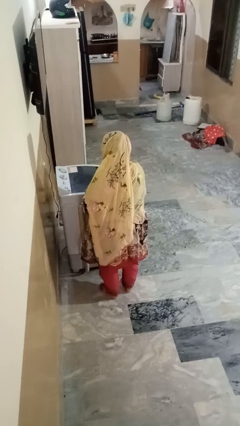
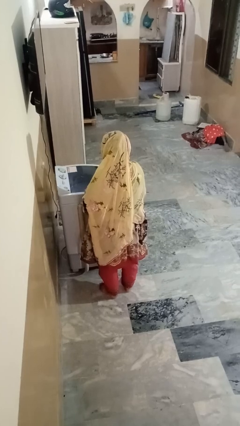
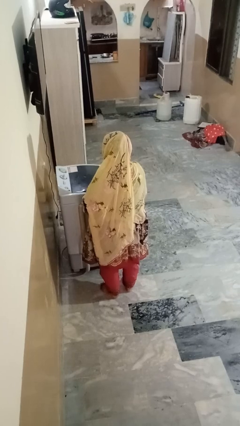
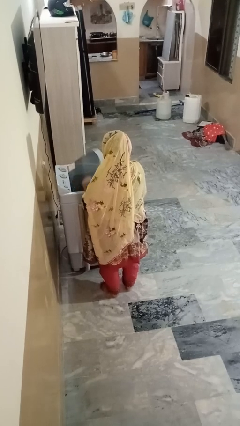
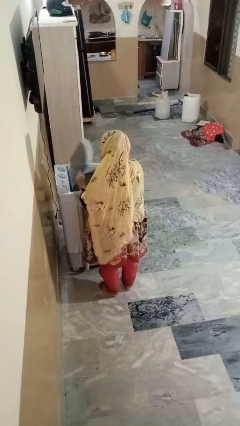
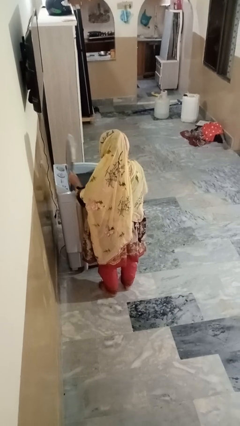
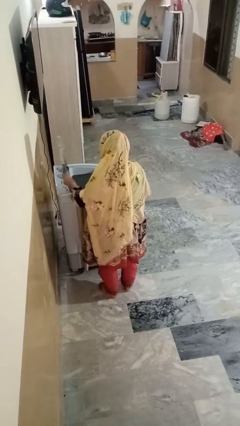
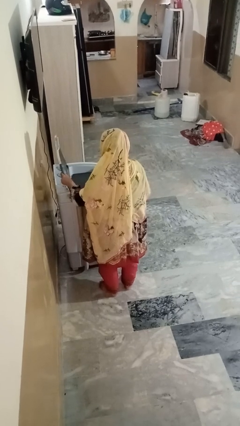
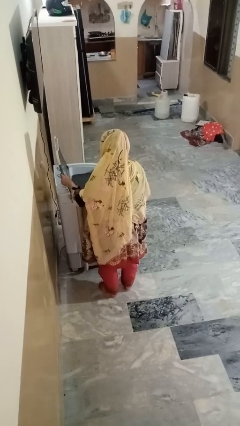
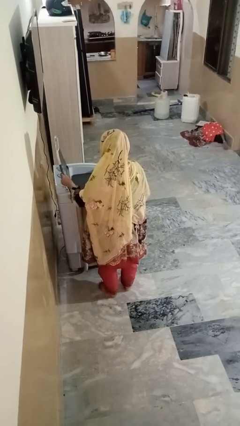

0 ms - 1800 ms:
person opens clothes washer

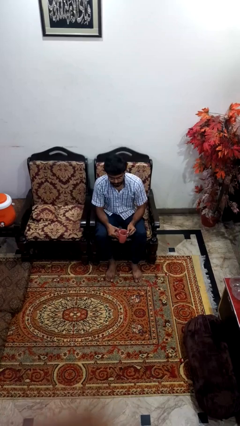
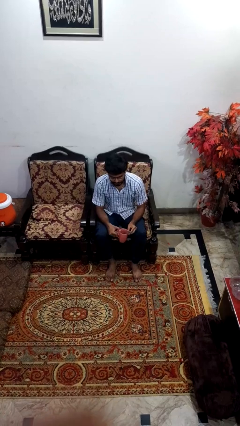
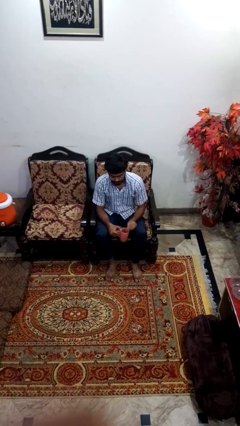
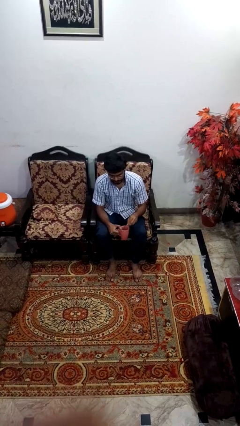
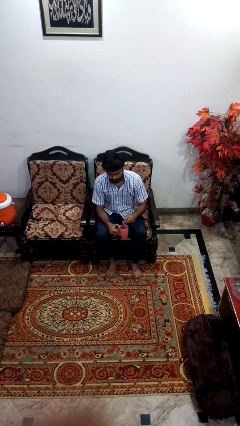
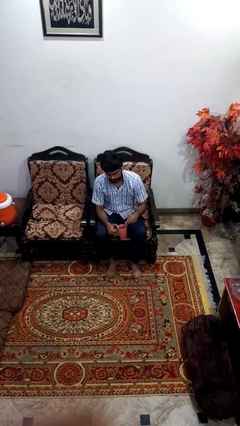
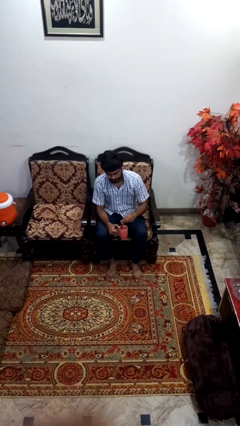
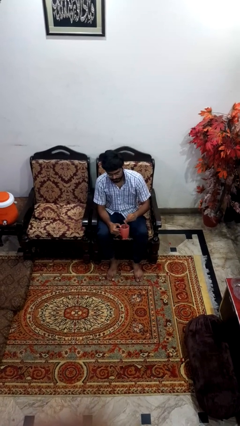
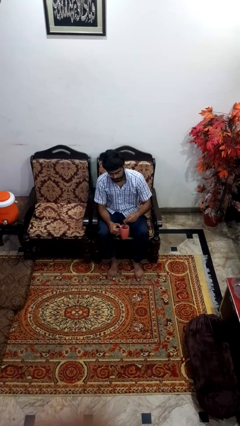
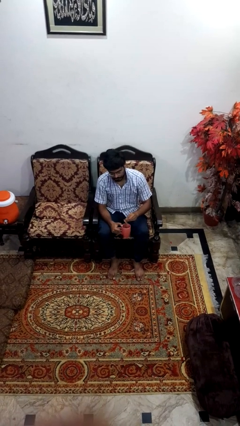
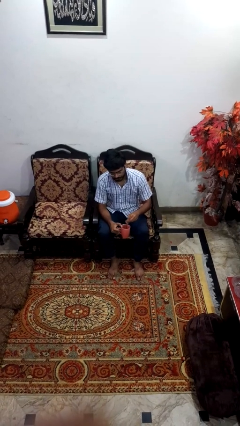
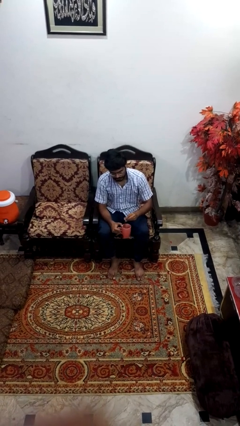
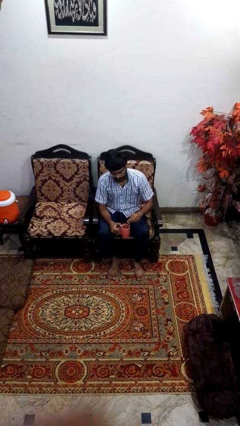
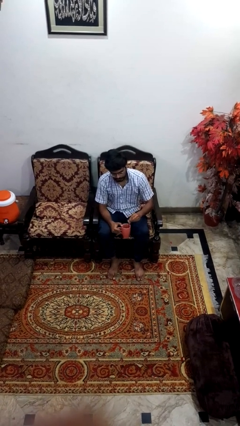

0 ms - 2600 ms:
person stirs mug

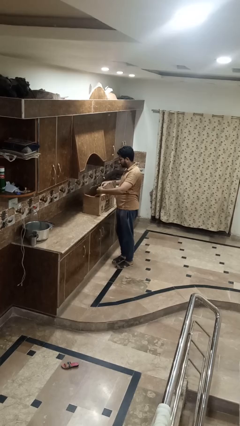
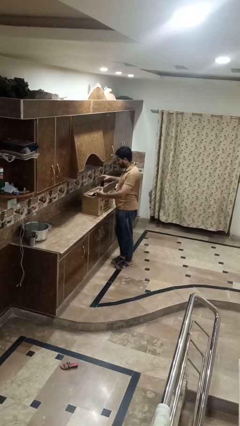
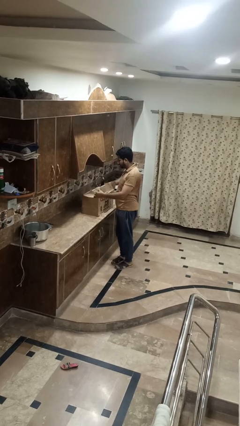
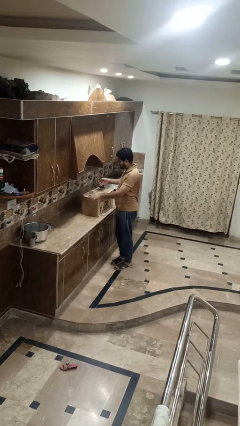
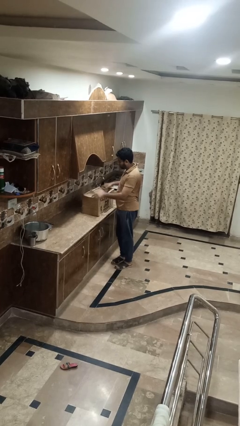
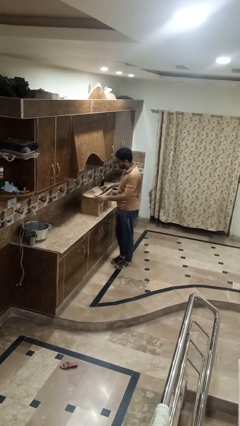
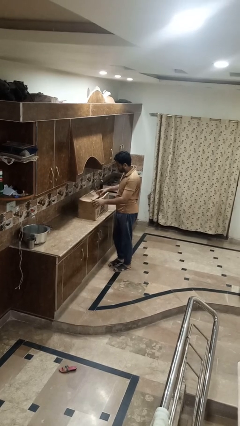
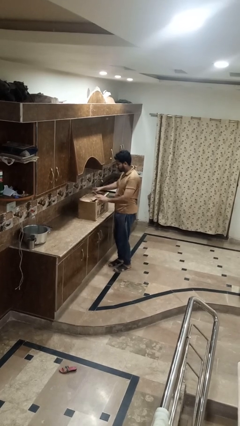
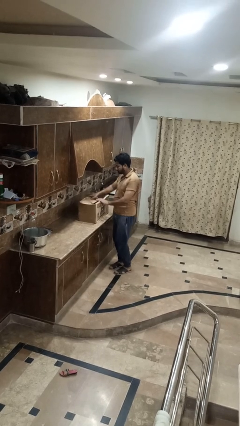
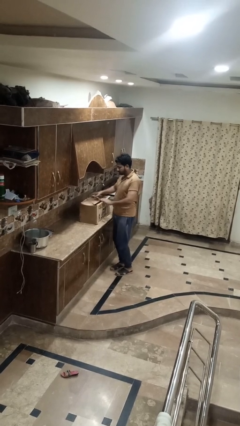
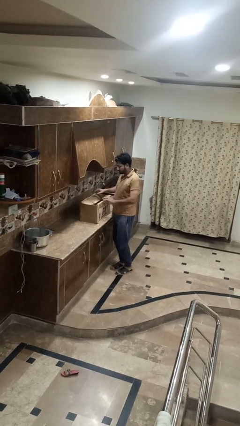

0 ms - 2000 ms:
person closes box

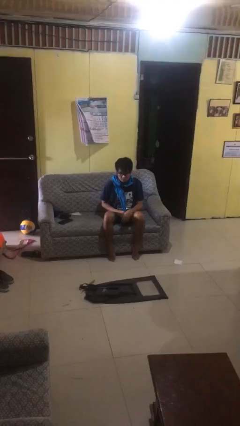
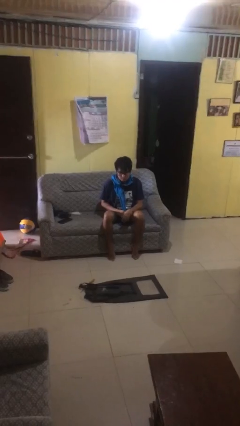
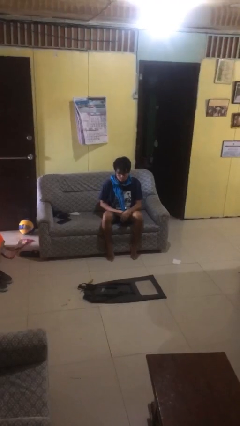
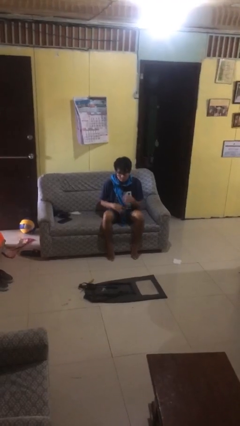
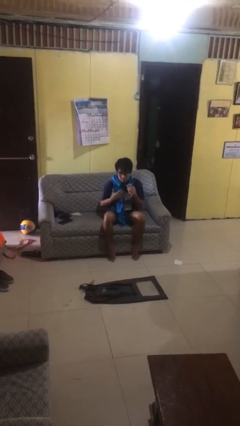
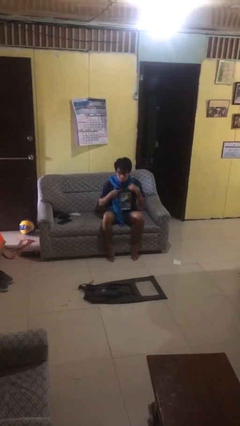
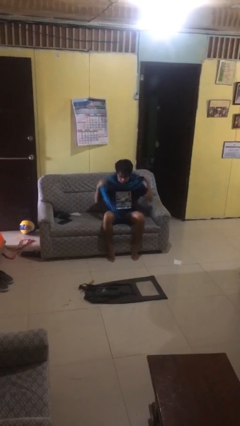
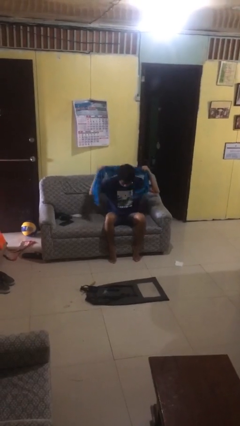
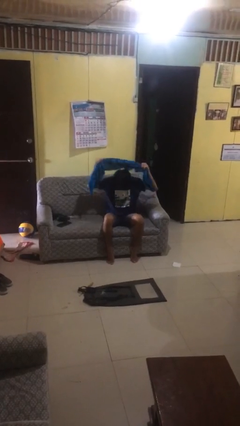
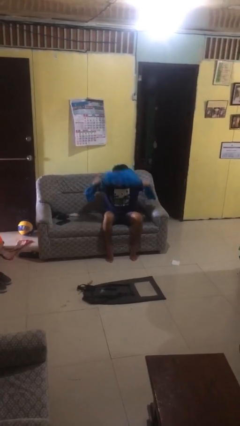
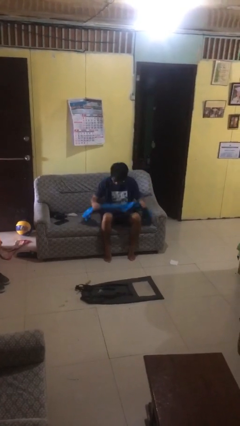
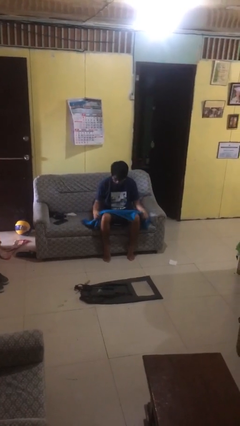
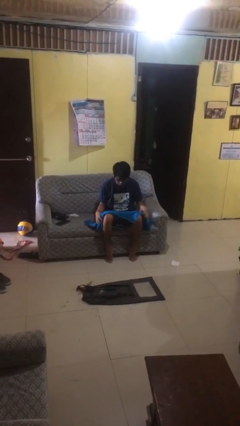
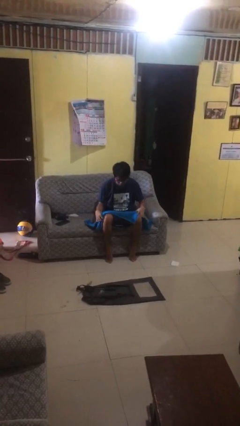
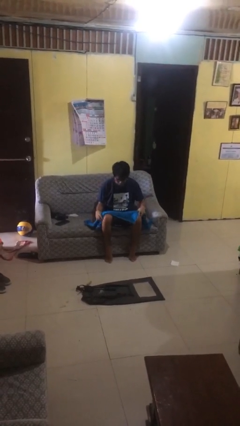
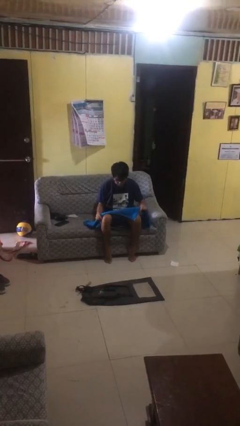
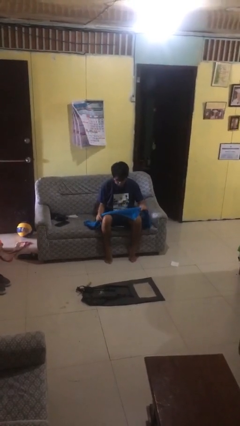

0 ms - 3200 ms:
person takes off scarf

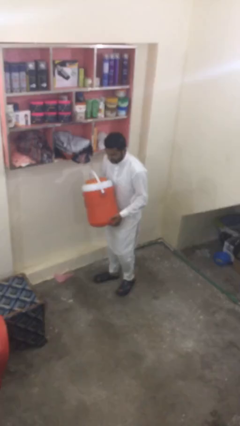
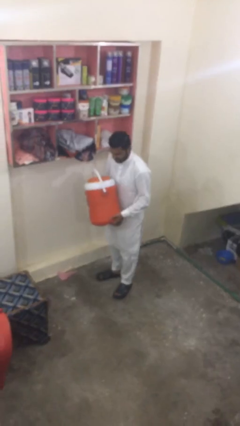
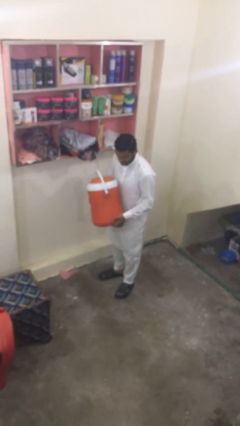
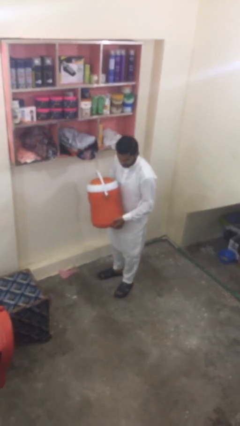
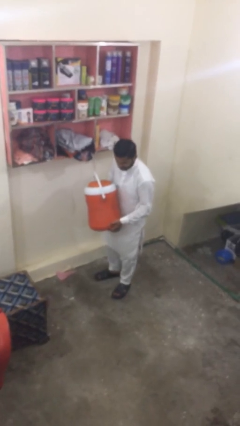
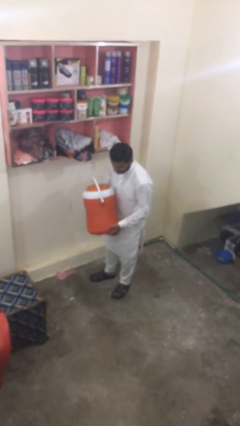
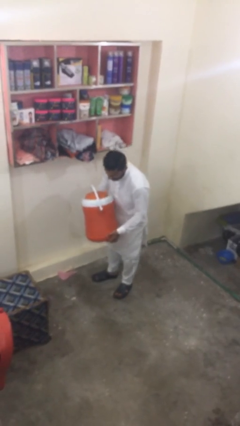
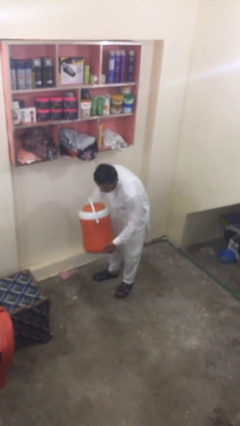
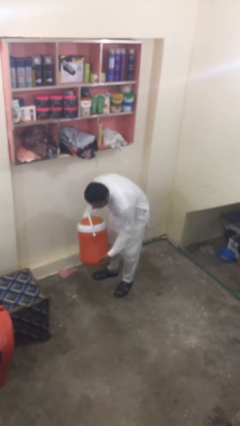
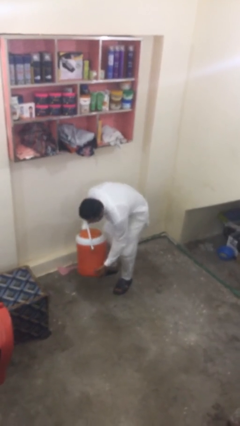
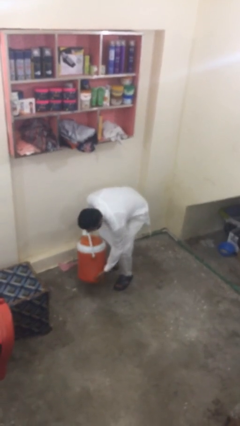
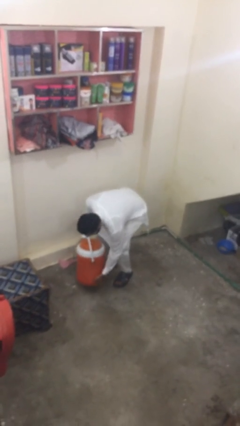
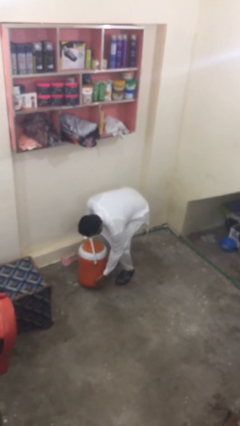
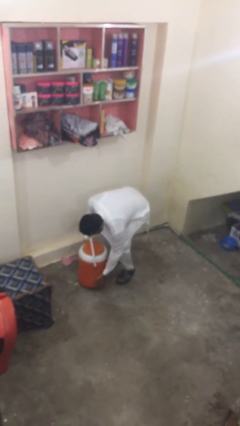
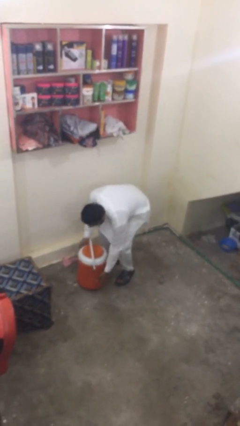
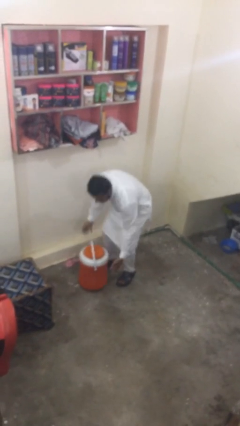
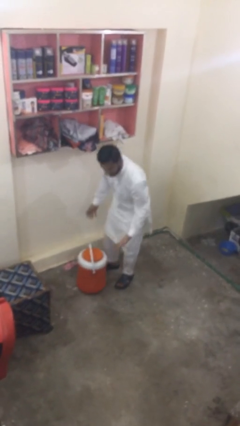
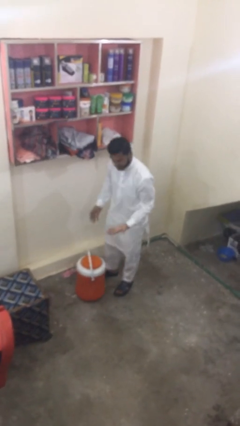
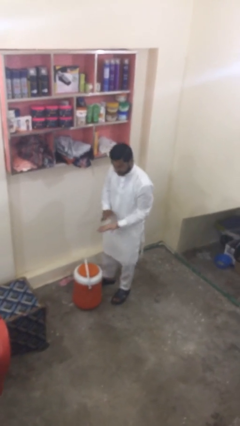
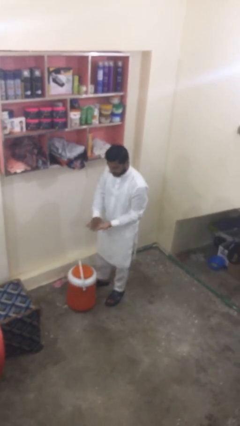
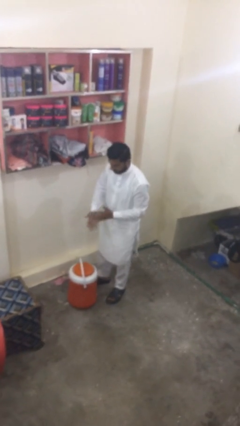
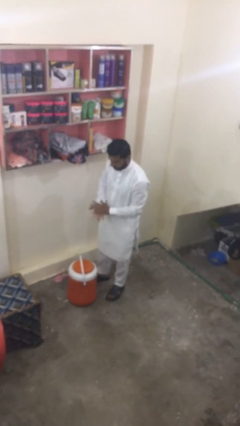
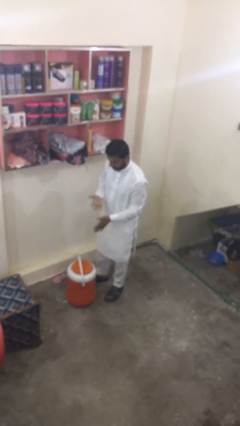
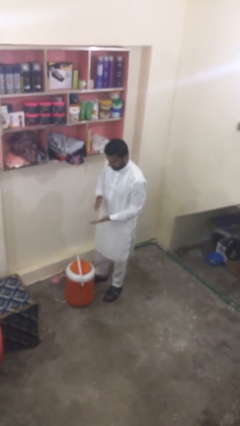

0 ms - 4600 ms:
person puts down object on floor

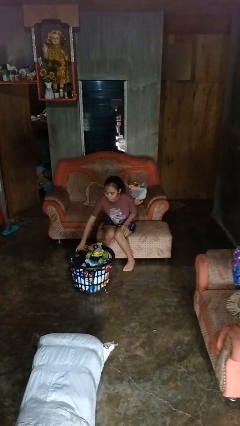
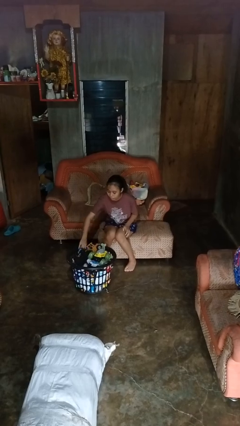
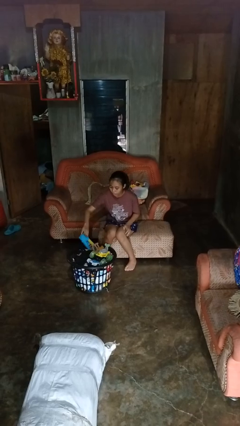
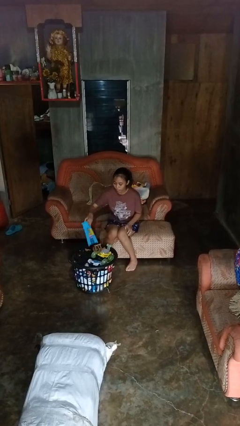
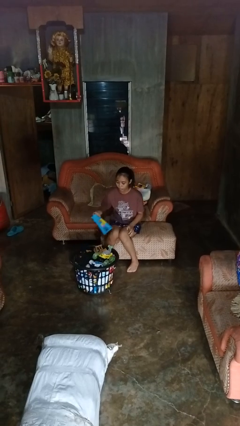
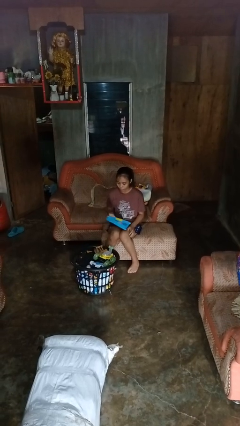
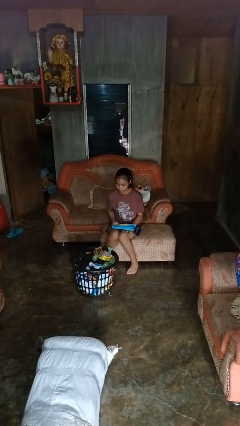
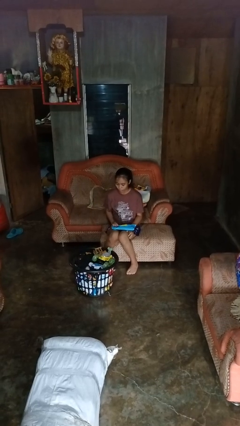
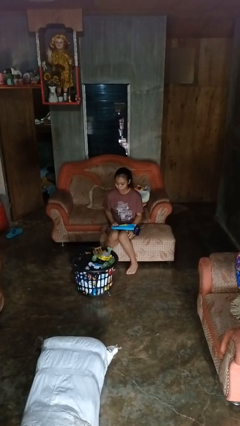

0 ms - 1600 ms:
person takes object from basket

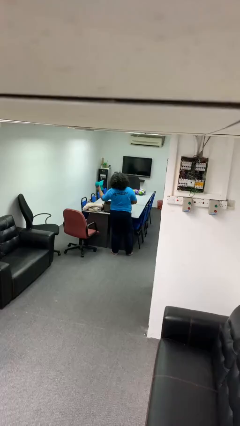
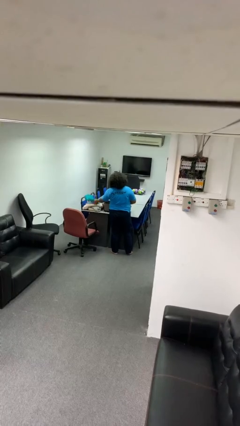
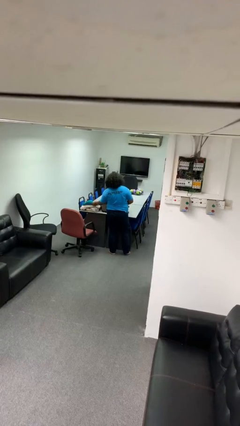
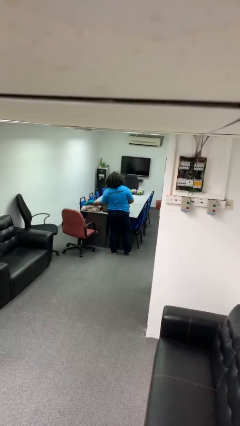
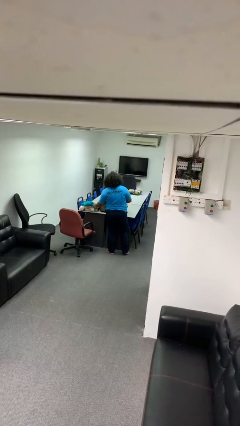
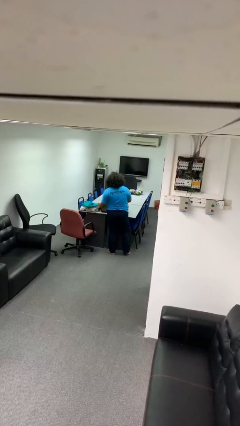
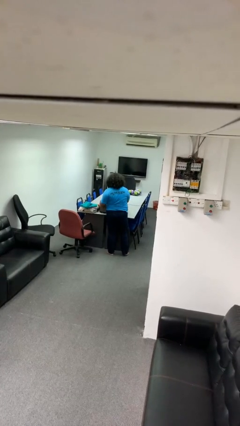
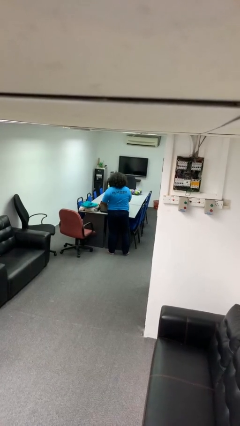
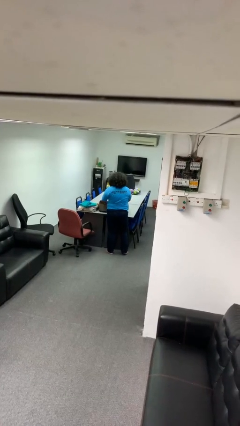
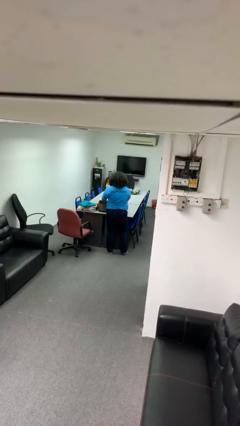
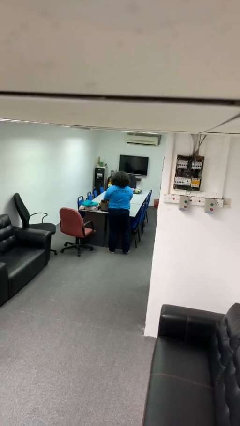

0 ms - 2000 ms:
person unloads clothes from suitcase
